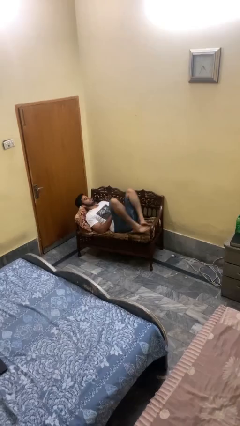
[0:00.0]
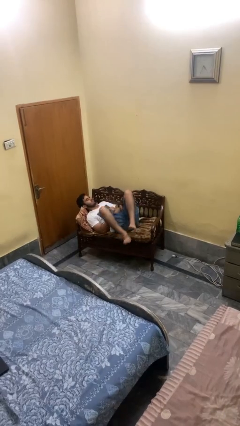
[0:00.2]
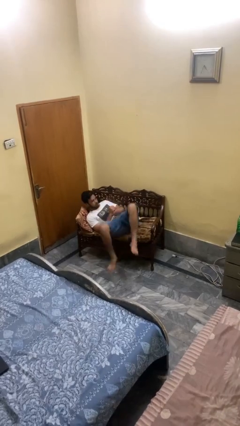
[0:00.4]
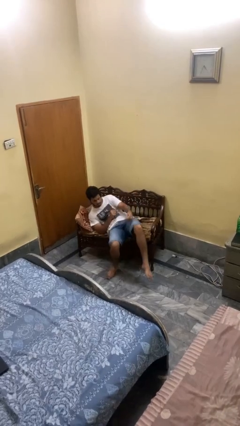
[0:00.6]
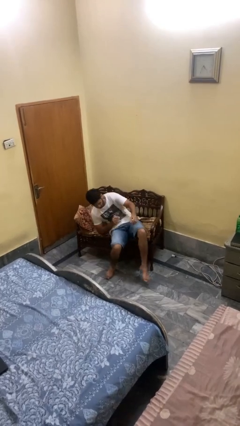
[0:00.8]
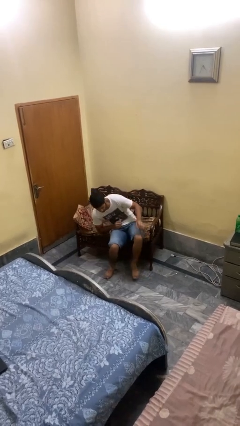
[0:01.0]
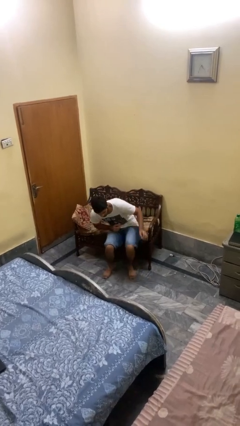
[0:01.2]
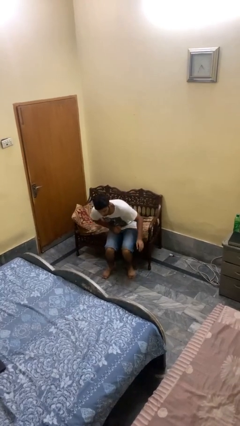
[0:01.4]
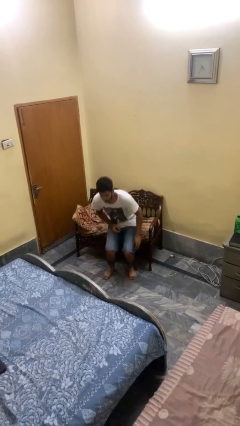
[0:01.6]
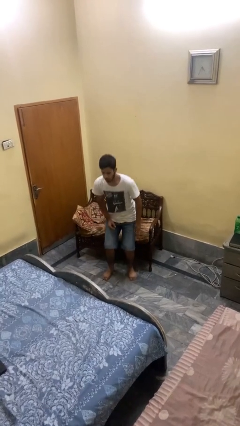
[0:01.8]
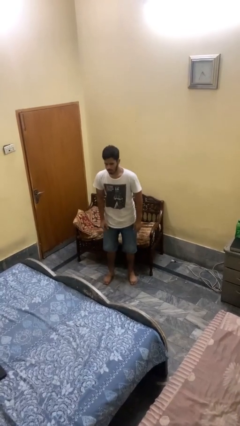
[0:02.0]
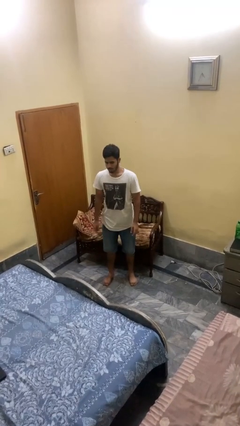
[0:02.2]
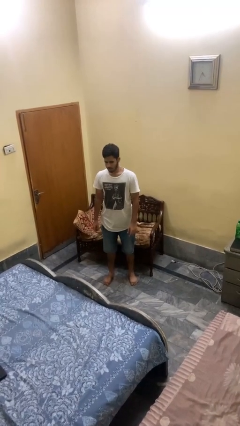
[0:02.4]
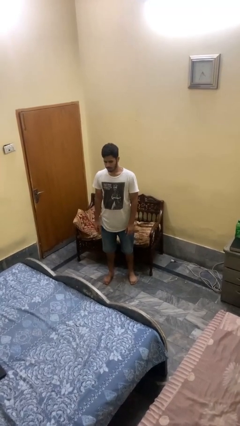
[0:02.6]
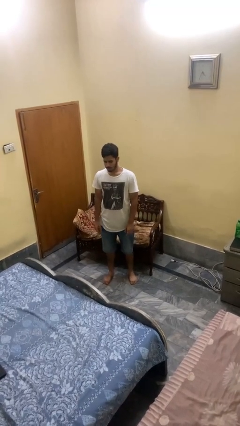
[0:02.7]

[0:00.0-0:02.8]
person stands up

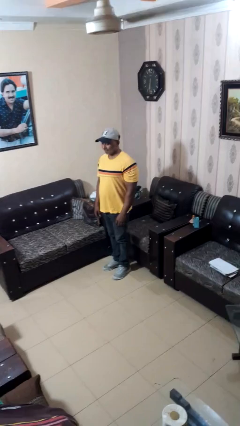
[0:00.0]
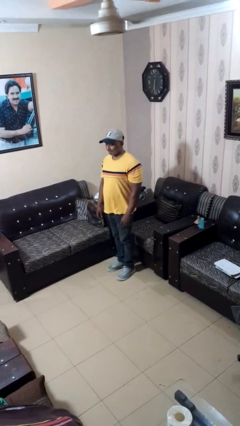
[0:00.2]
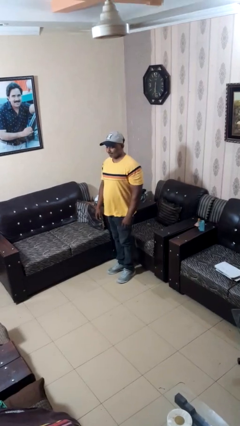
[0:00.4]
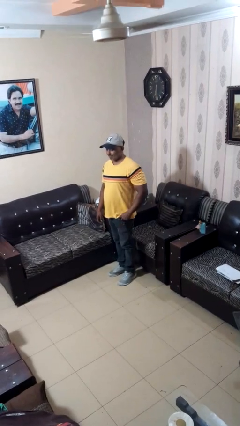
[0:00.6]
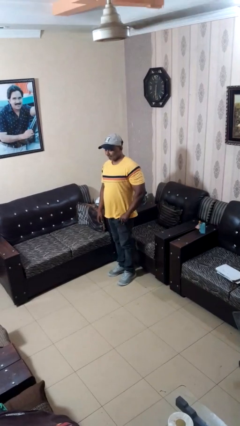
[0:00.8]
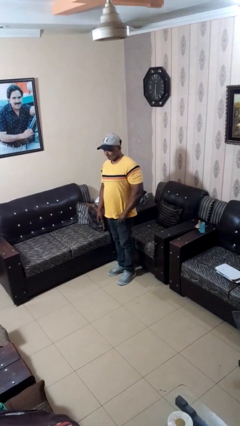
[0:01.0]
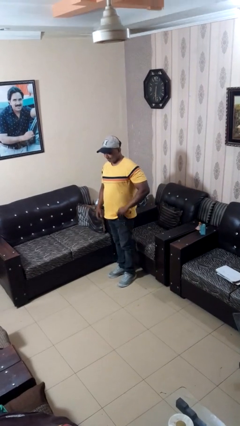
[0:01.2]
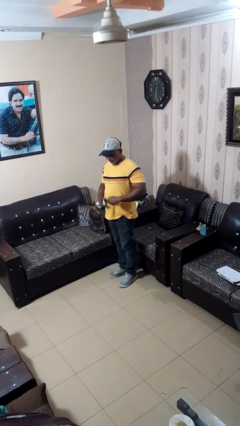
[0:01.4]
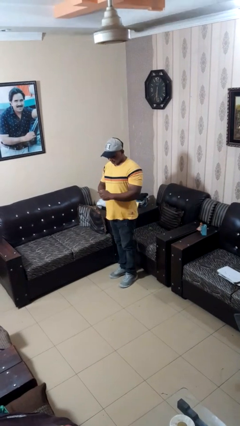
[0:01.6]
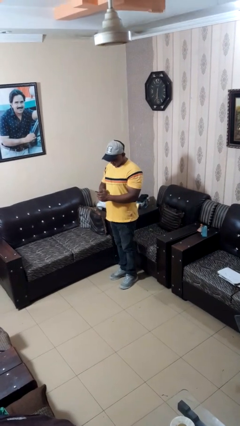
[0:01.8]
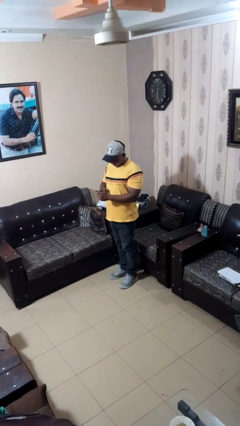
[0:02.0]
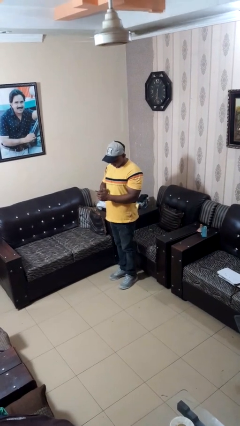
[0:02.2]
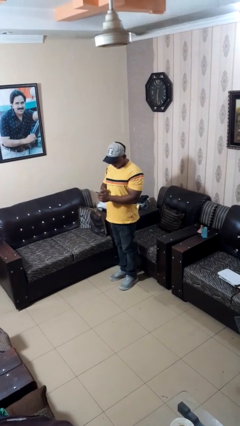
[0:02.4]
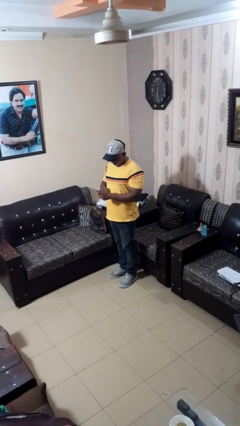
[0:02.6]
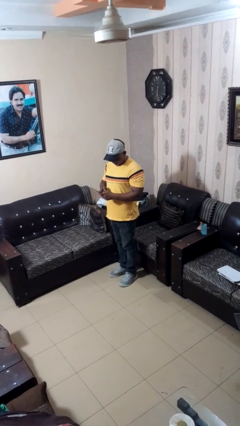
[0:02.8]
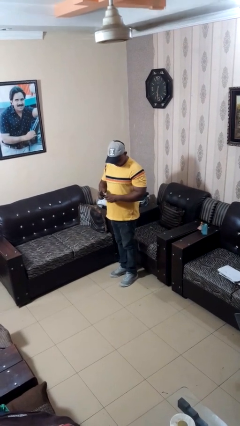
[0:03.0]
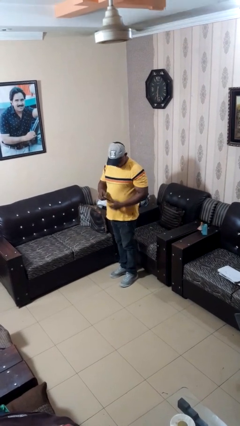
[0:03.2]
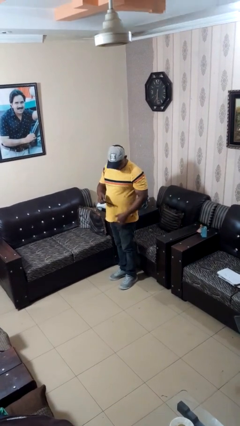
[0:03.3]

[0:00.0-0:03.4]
person takes phone from pocket

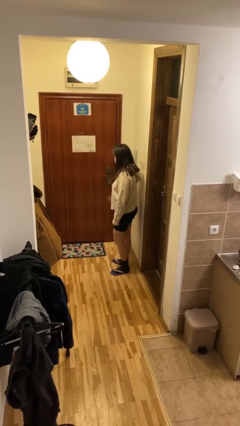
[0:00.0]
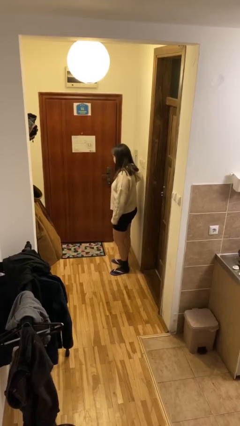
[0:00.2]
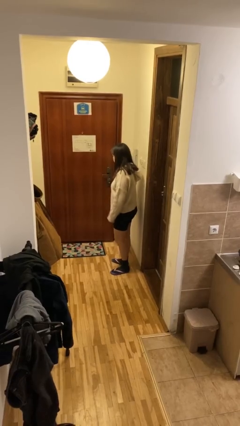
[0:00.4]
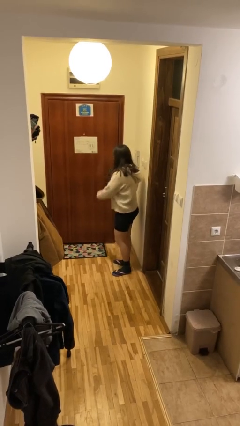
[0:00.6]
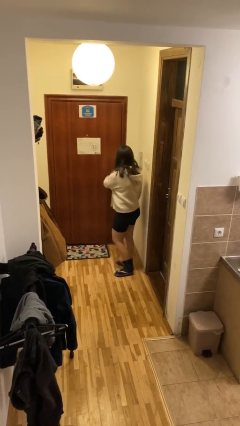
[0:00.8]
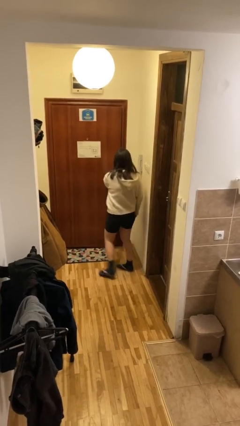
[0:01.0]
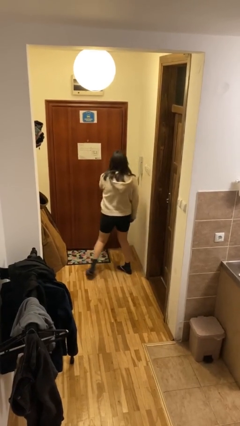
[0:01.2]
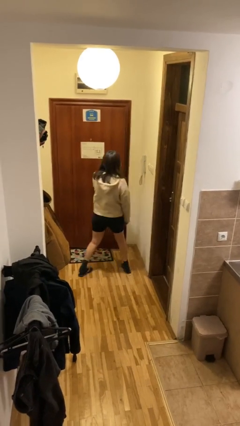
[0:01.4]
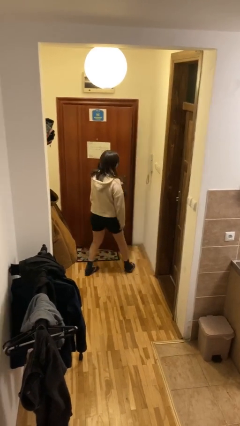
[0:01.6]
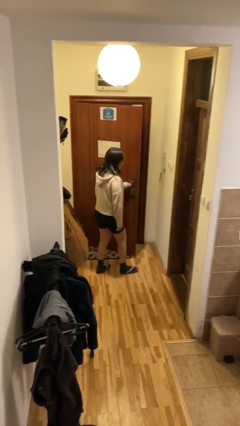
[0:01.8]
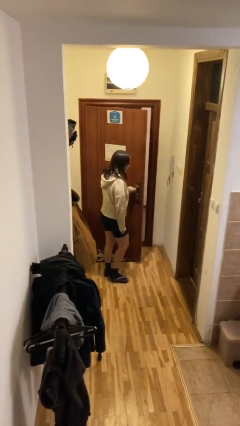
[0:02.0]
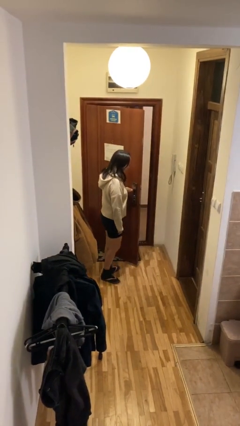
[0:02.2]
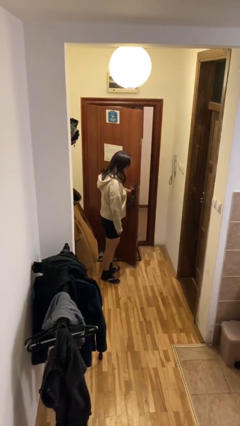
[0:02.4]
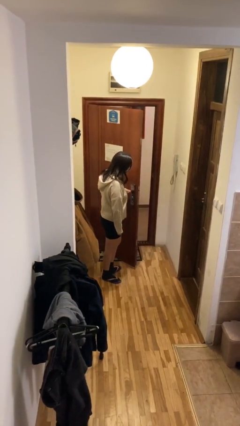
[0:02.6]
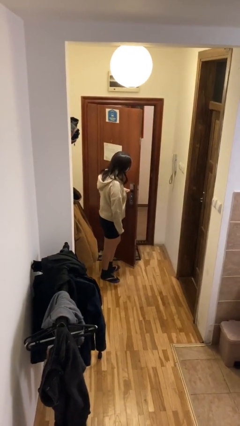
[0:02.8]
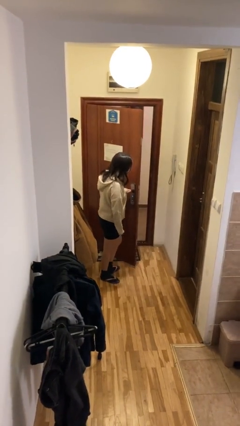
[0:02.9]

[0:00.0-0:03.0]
person opens facility door

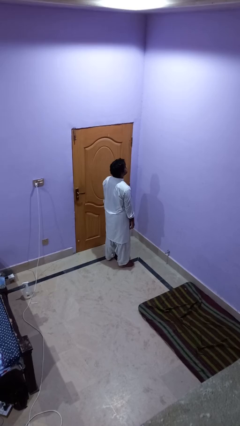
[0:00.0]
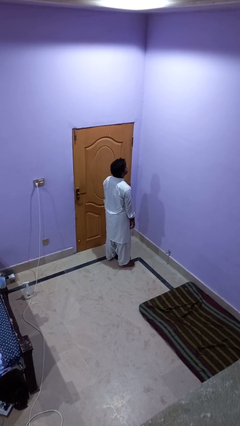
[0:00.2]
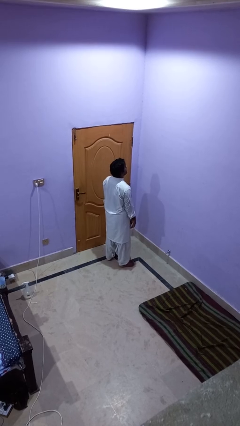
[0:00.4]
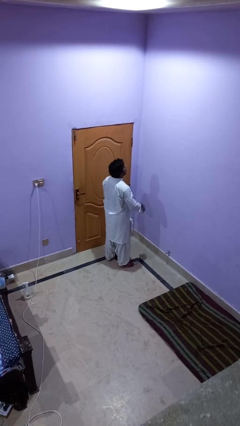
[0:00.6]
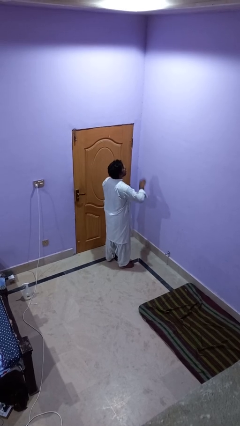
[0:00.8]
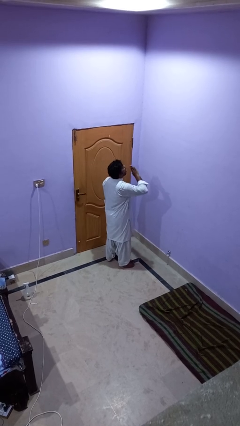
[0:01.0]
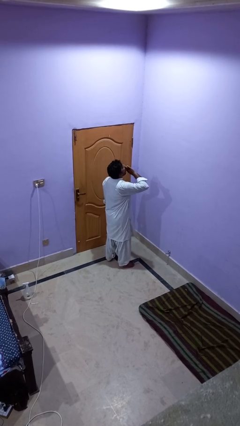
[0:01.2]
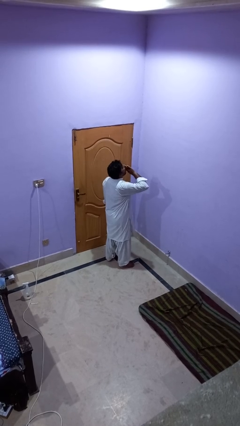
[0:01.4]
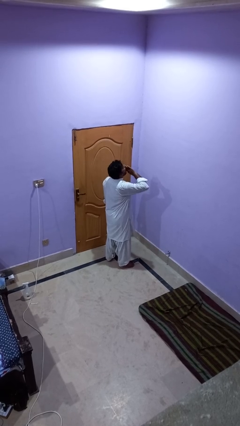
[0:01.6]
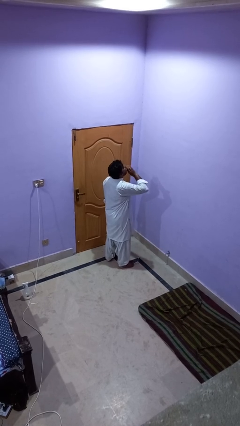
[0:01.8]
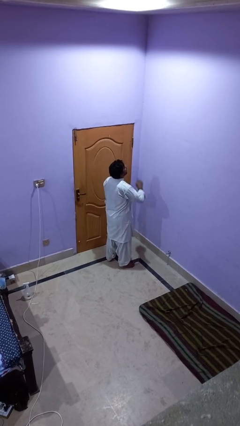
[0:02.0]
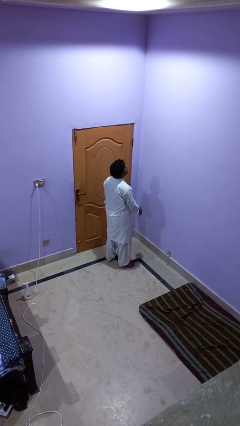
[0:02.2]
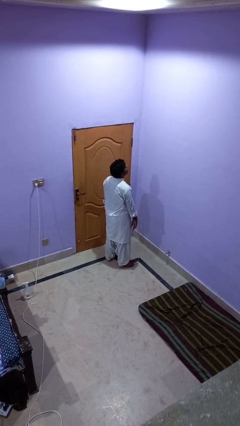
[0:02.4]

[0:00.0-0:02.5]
person yawns

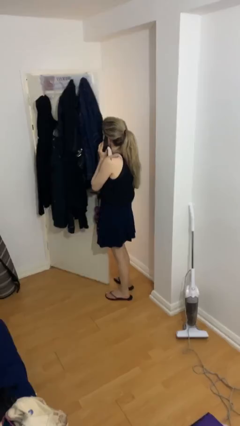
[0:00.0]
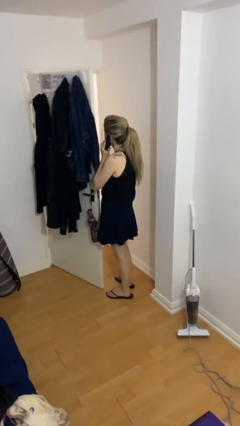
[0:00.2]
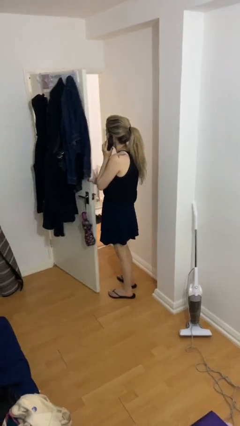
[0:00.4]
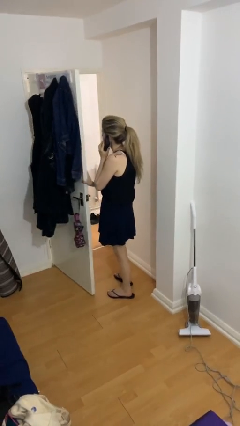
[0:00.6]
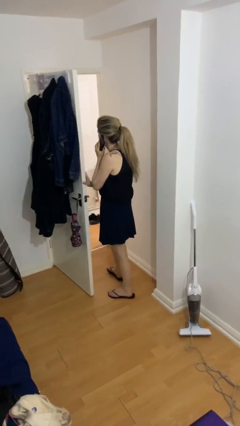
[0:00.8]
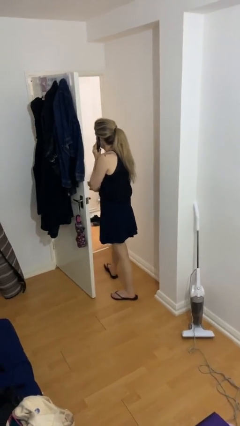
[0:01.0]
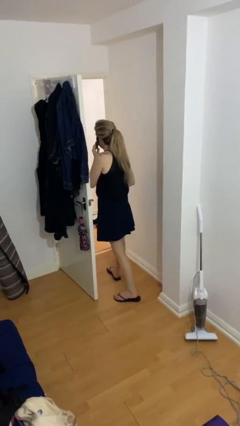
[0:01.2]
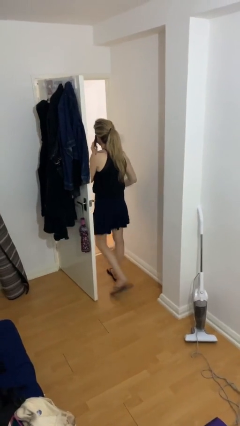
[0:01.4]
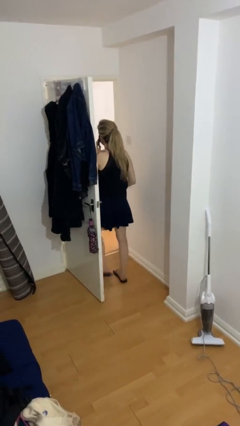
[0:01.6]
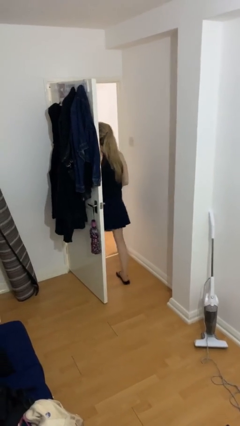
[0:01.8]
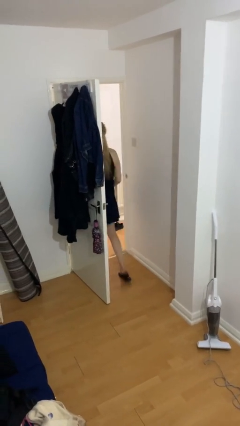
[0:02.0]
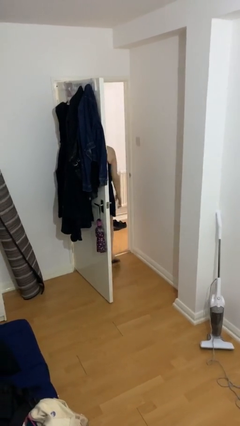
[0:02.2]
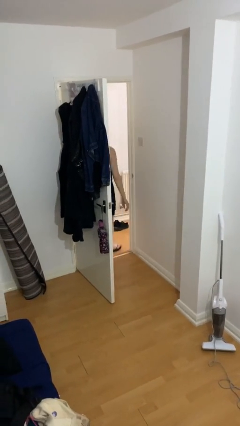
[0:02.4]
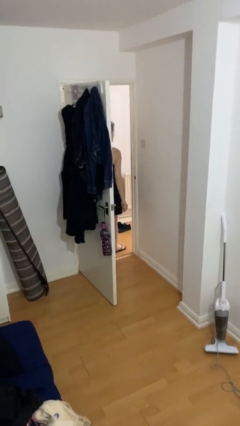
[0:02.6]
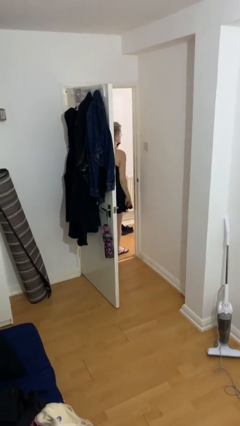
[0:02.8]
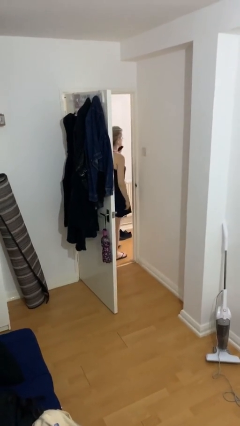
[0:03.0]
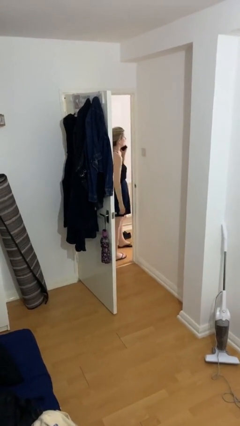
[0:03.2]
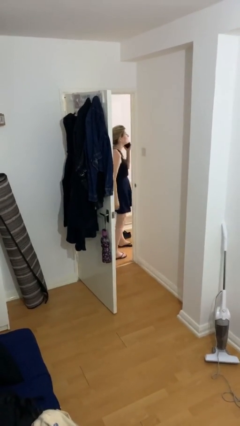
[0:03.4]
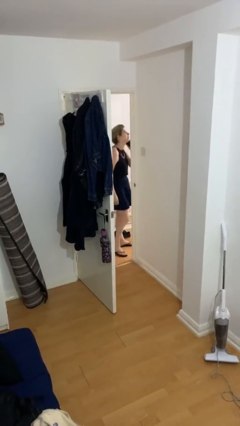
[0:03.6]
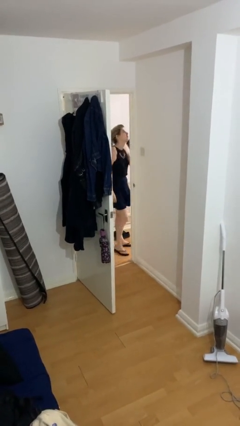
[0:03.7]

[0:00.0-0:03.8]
person exits scene through structure

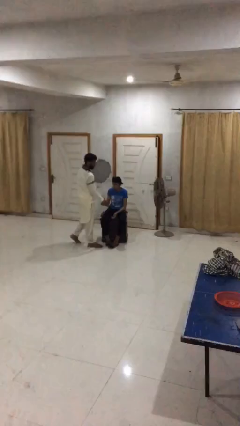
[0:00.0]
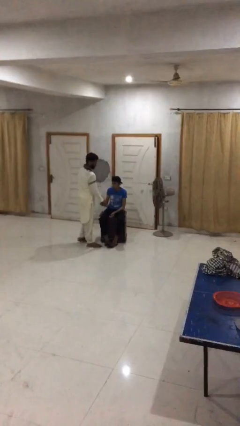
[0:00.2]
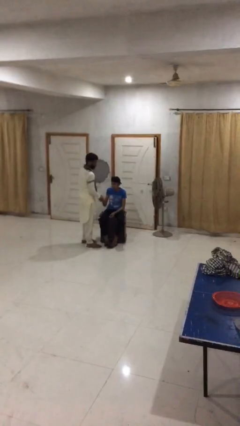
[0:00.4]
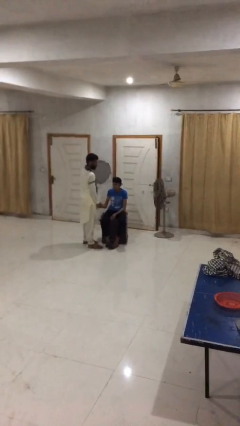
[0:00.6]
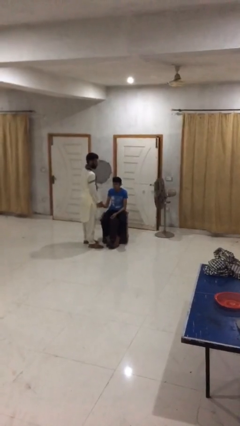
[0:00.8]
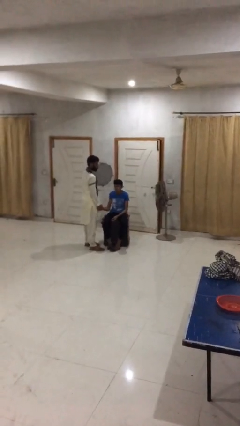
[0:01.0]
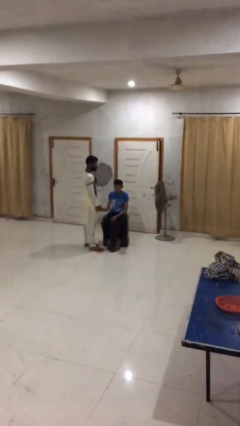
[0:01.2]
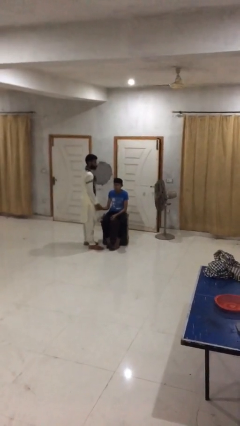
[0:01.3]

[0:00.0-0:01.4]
person shakes hand

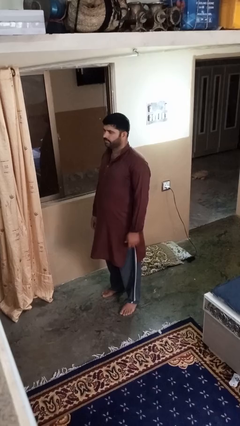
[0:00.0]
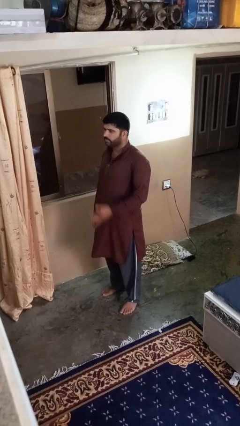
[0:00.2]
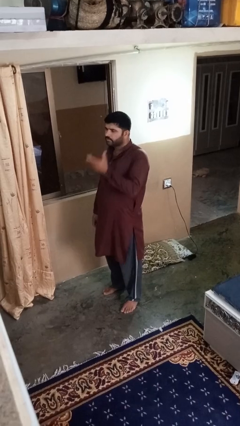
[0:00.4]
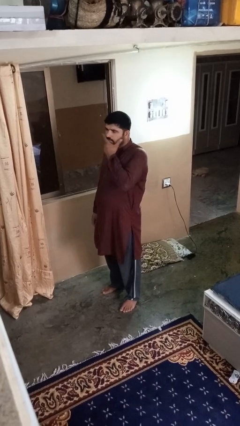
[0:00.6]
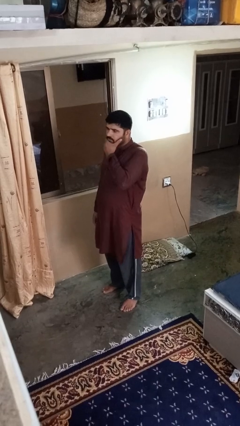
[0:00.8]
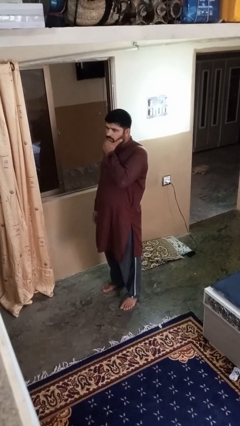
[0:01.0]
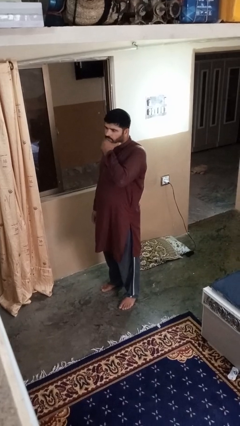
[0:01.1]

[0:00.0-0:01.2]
person strokes chin
